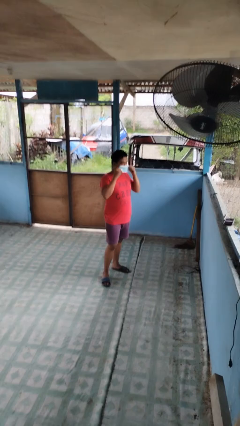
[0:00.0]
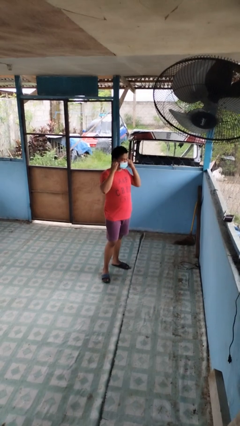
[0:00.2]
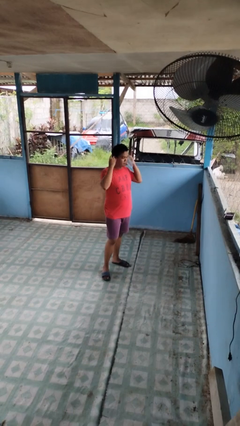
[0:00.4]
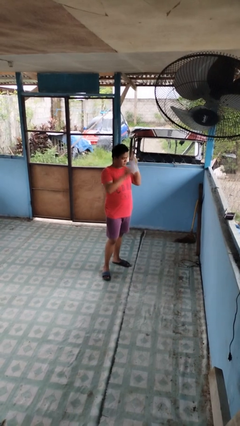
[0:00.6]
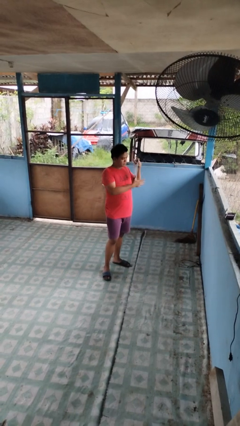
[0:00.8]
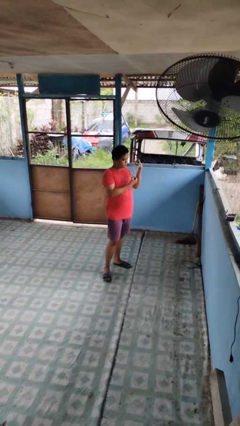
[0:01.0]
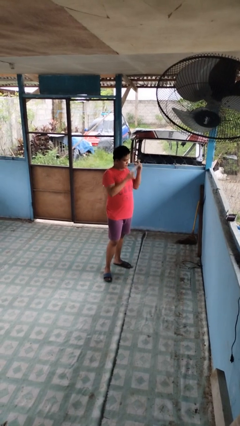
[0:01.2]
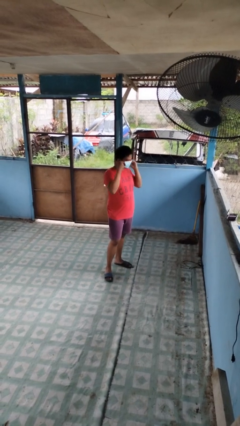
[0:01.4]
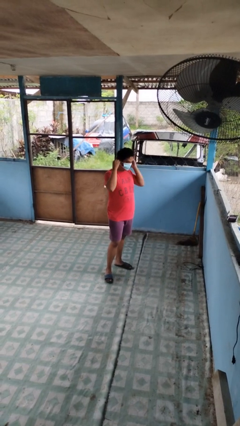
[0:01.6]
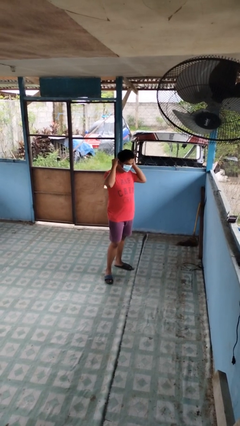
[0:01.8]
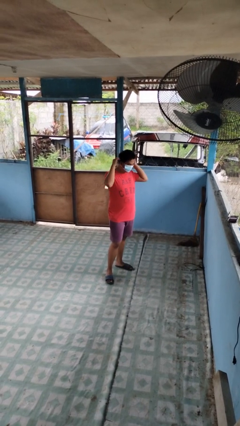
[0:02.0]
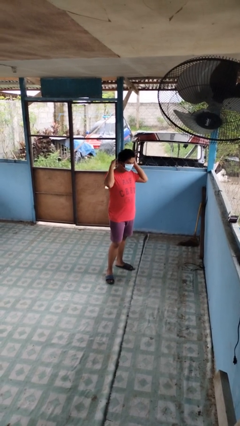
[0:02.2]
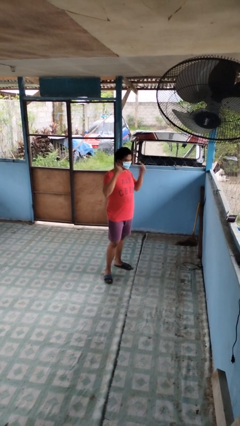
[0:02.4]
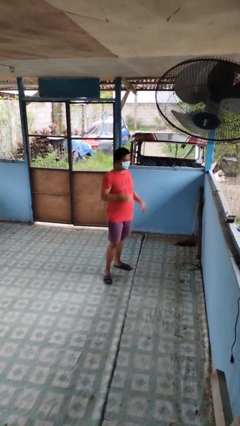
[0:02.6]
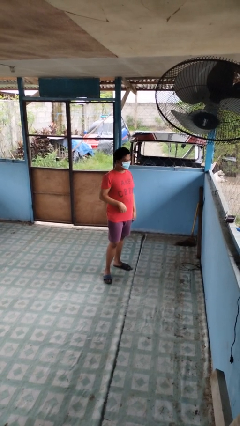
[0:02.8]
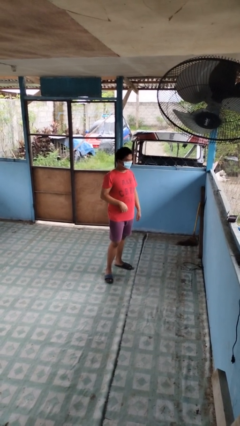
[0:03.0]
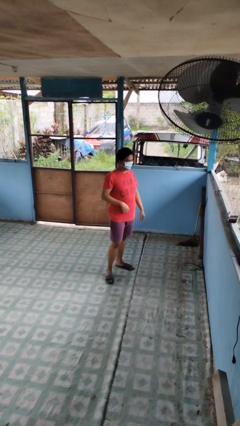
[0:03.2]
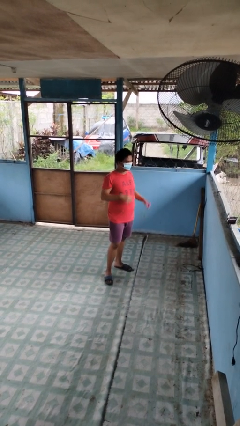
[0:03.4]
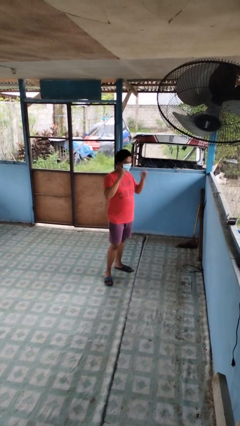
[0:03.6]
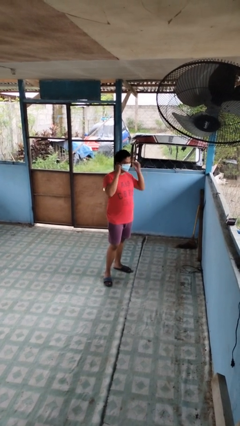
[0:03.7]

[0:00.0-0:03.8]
person puts on facemask

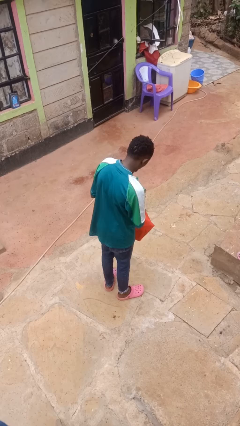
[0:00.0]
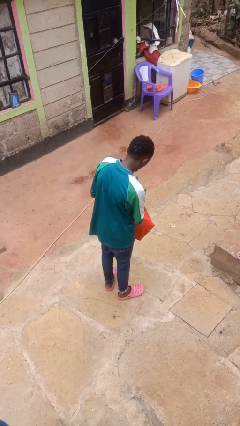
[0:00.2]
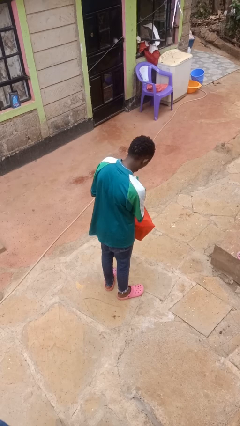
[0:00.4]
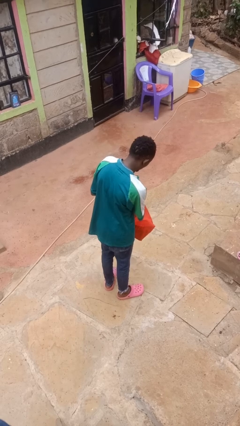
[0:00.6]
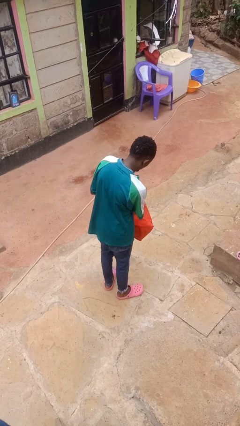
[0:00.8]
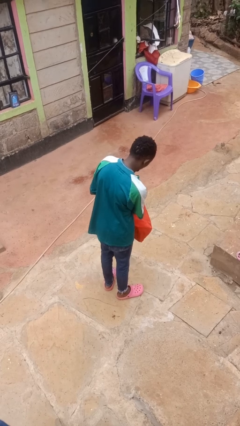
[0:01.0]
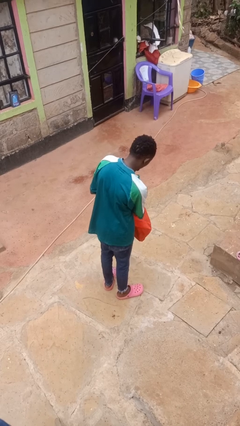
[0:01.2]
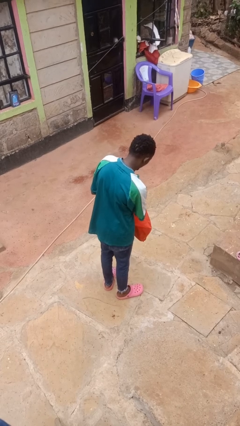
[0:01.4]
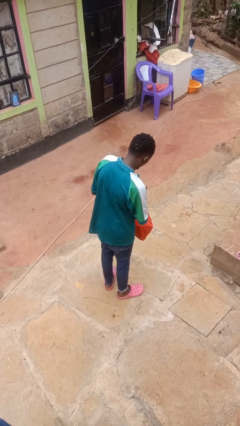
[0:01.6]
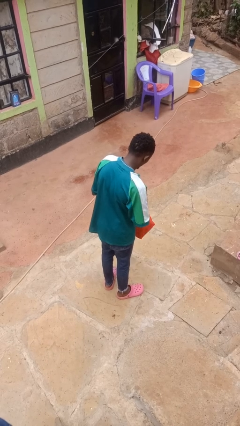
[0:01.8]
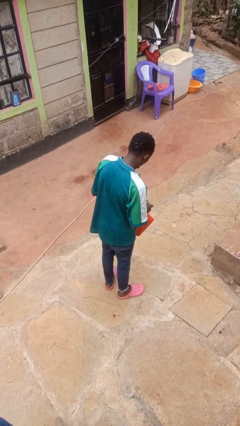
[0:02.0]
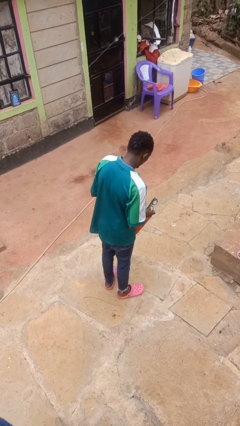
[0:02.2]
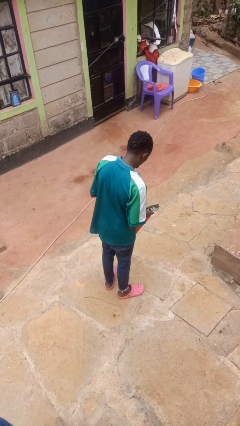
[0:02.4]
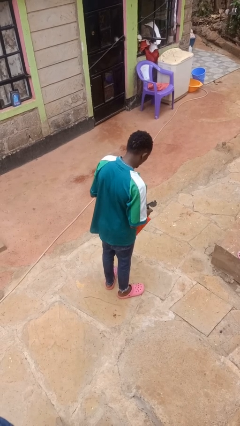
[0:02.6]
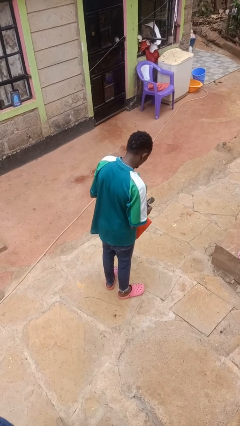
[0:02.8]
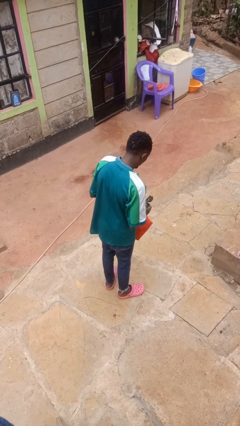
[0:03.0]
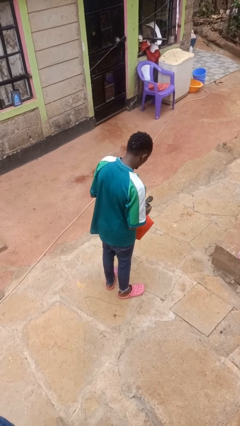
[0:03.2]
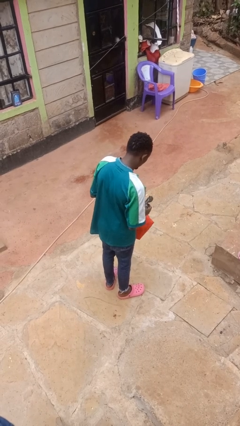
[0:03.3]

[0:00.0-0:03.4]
person takes object from bag

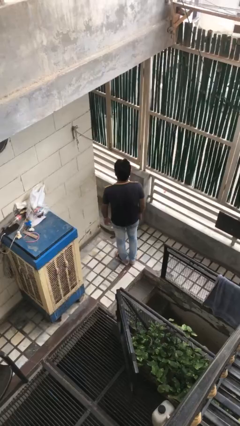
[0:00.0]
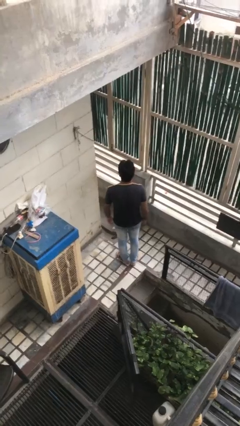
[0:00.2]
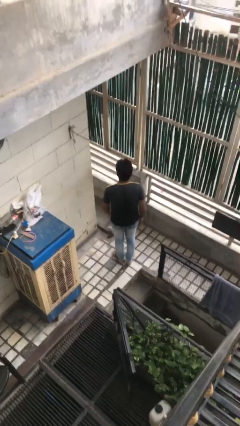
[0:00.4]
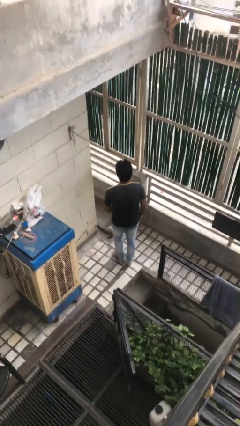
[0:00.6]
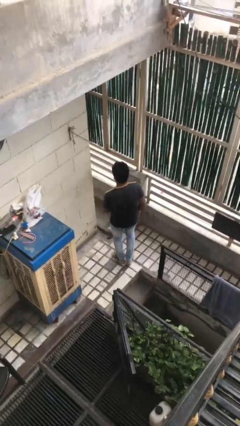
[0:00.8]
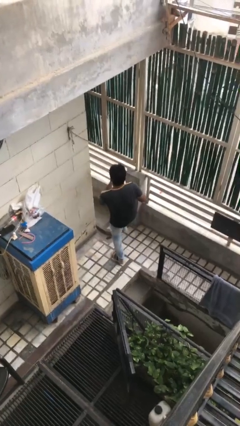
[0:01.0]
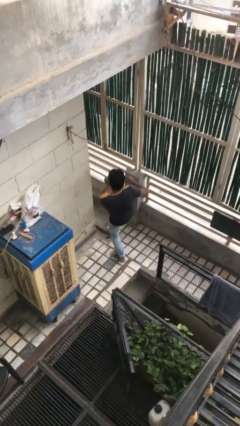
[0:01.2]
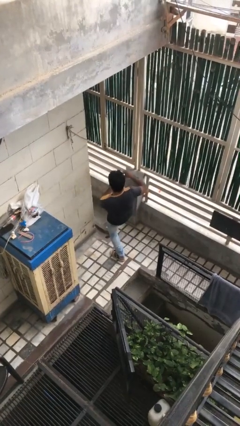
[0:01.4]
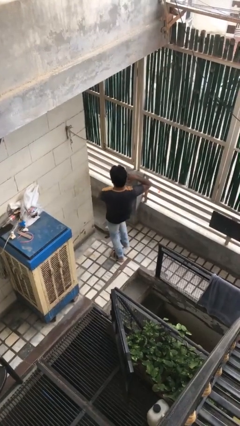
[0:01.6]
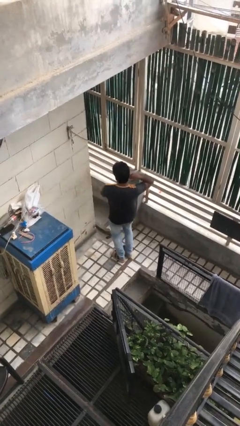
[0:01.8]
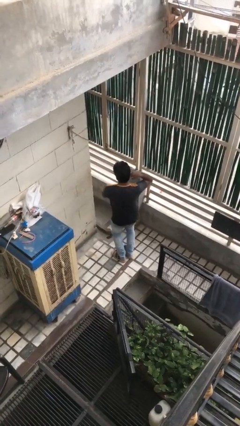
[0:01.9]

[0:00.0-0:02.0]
person karate kicks

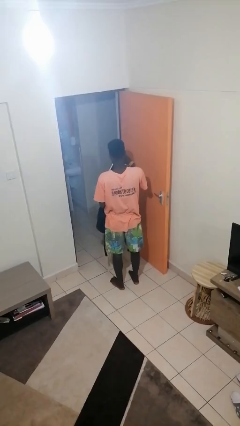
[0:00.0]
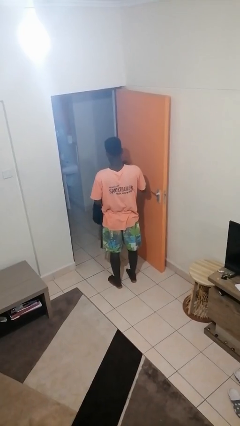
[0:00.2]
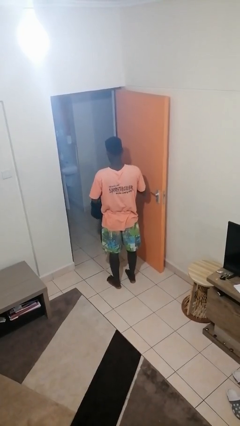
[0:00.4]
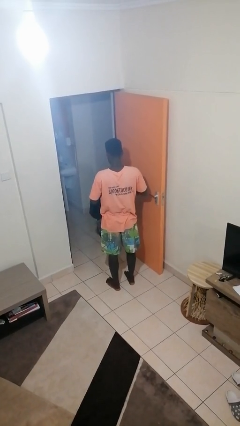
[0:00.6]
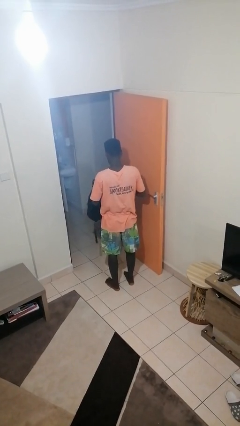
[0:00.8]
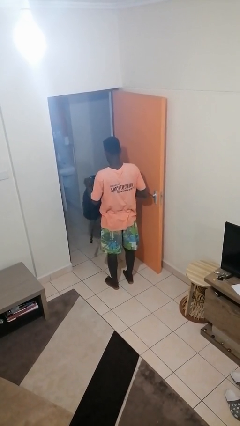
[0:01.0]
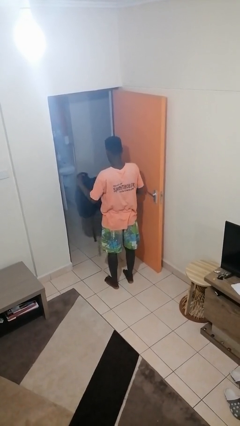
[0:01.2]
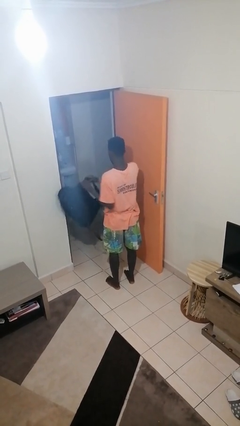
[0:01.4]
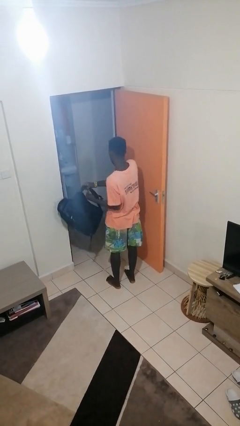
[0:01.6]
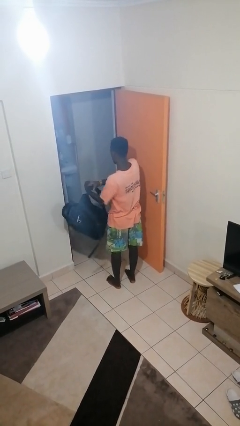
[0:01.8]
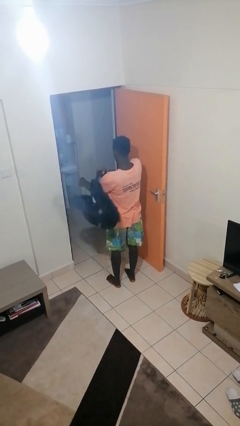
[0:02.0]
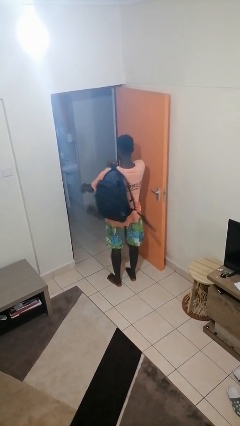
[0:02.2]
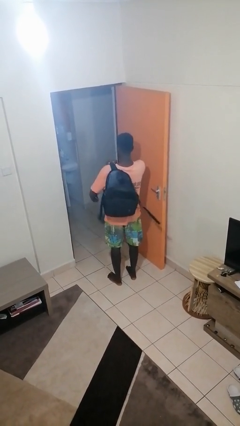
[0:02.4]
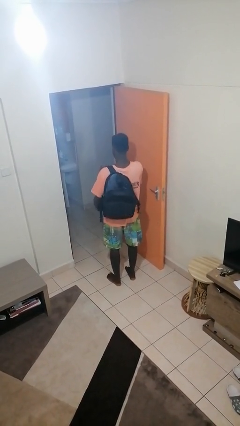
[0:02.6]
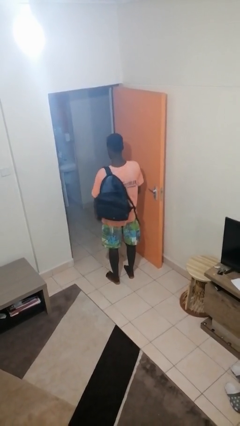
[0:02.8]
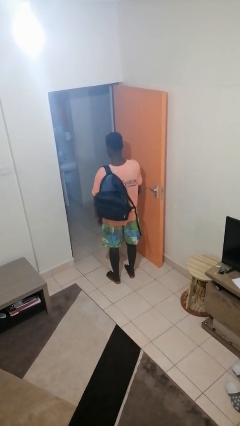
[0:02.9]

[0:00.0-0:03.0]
person puts object into backpack

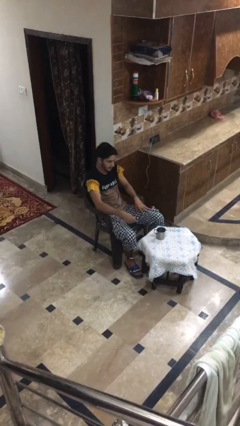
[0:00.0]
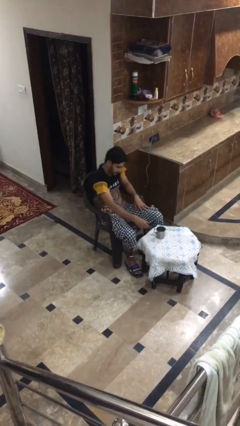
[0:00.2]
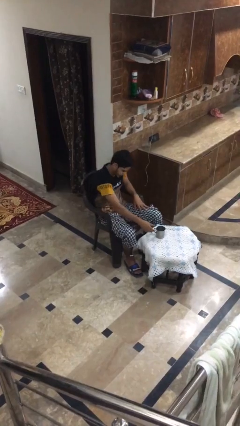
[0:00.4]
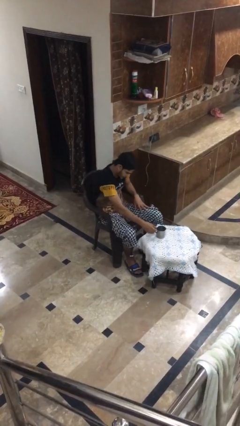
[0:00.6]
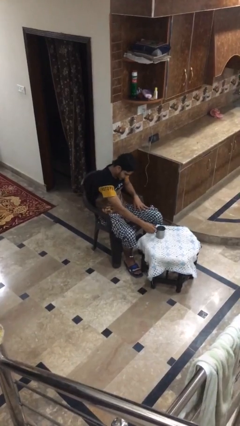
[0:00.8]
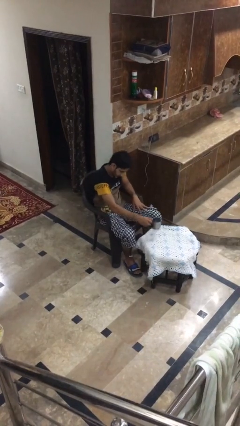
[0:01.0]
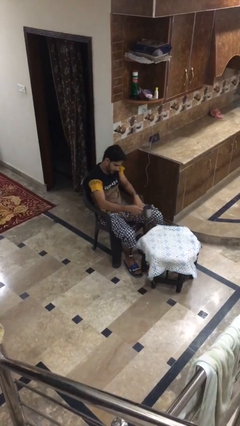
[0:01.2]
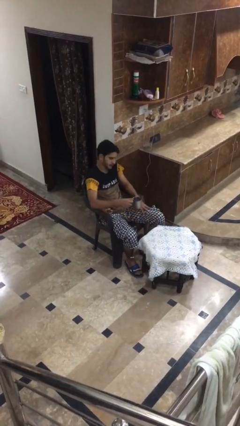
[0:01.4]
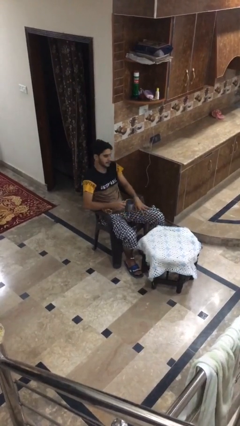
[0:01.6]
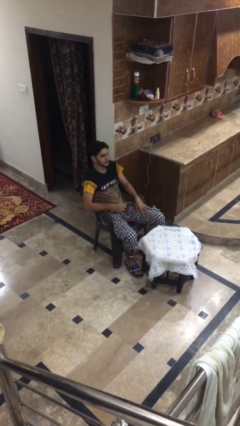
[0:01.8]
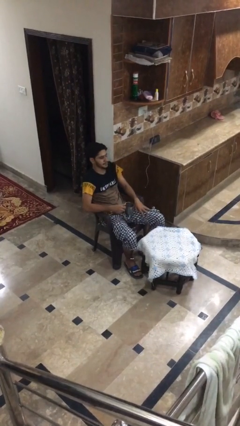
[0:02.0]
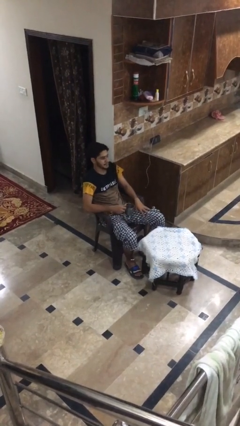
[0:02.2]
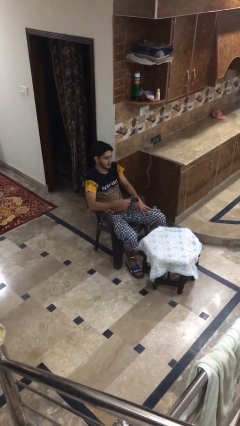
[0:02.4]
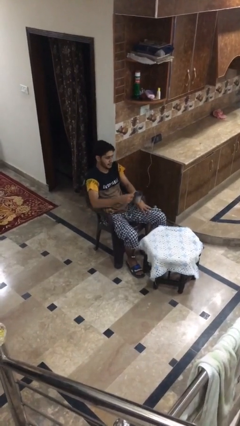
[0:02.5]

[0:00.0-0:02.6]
person picks up object from table

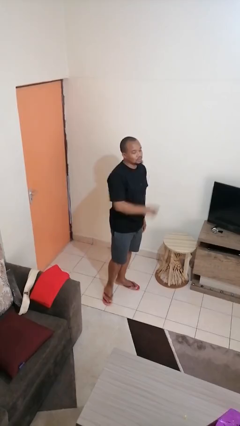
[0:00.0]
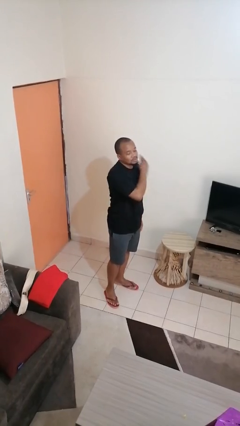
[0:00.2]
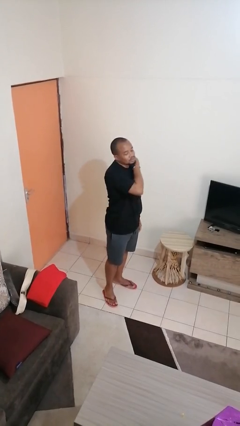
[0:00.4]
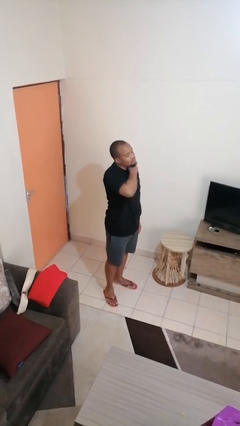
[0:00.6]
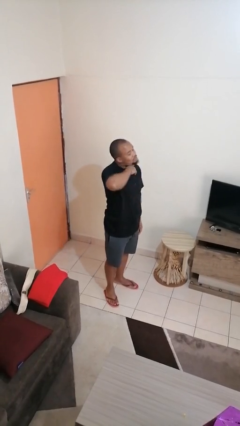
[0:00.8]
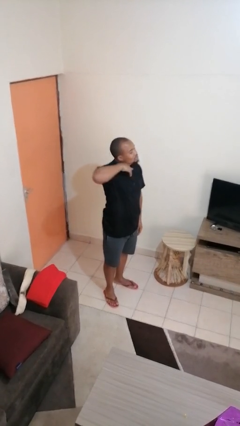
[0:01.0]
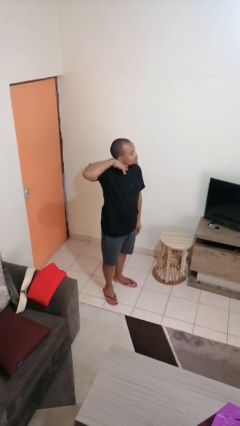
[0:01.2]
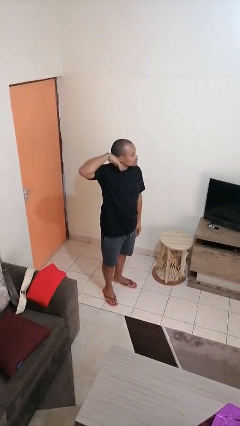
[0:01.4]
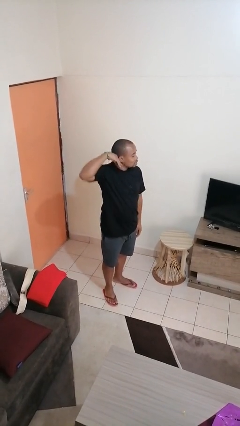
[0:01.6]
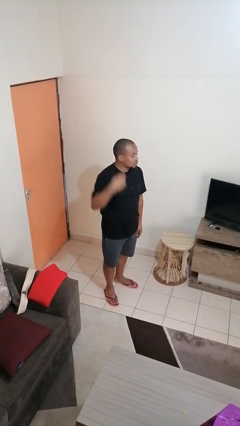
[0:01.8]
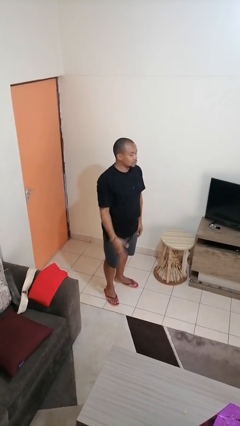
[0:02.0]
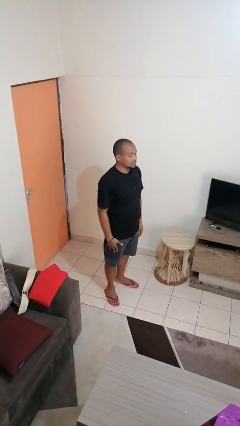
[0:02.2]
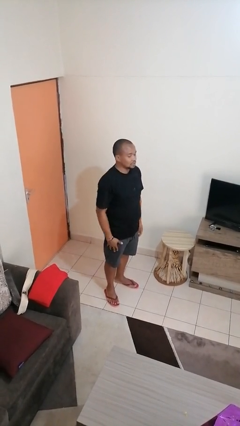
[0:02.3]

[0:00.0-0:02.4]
person gestures cut

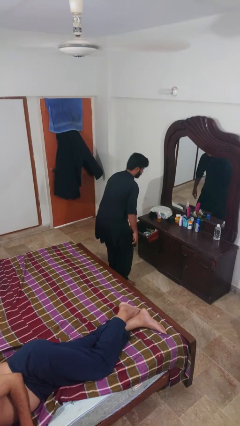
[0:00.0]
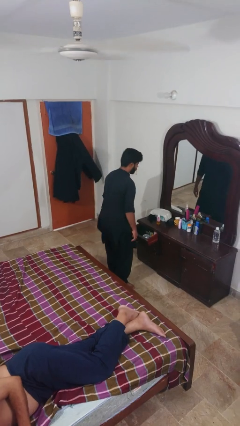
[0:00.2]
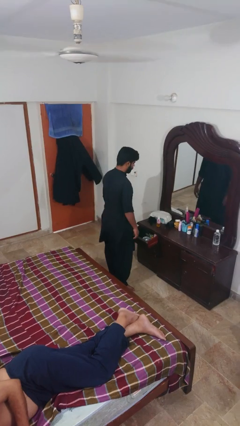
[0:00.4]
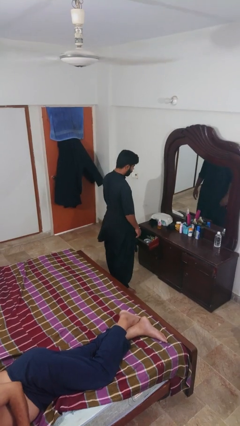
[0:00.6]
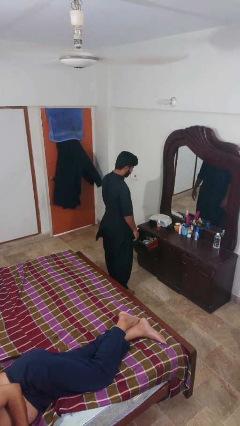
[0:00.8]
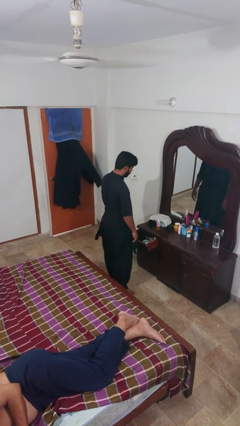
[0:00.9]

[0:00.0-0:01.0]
person closes dresser drawer
